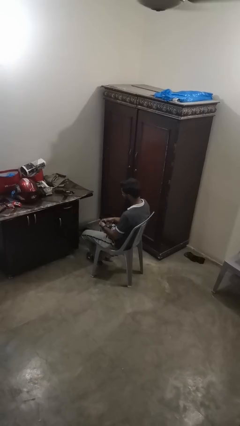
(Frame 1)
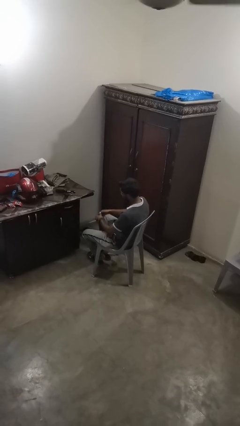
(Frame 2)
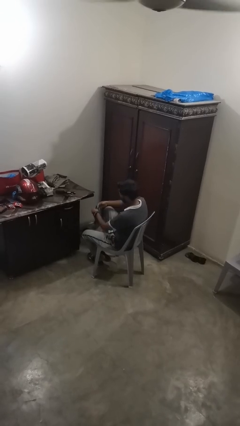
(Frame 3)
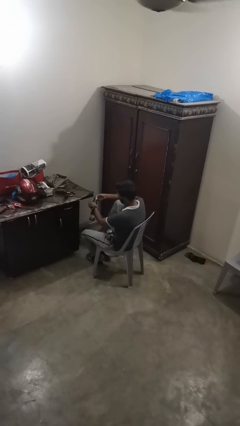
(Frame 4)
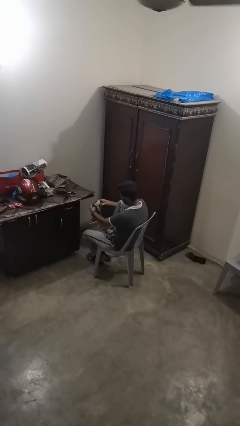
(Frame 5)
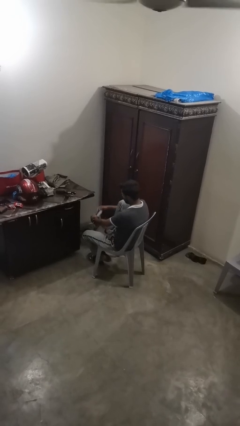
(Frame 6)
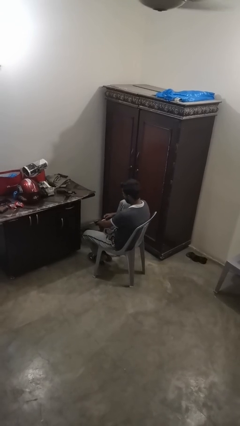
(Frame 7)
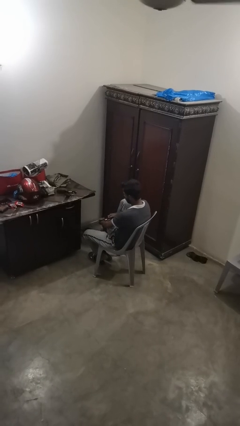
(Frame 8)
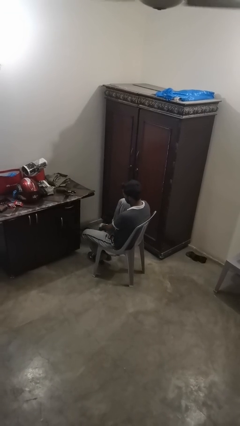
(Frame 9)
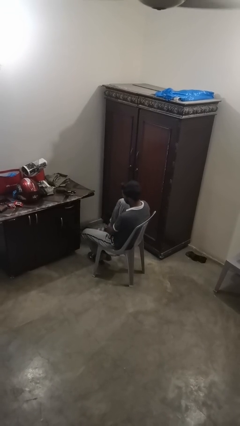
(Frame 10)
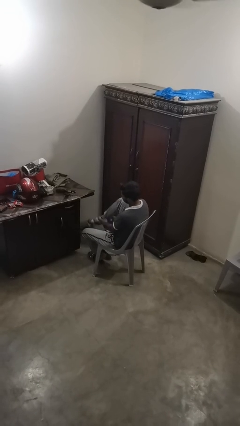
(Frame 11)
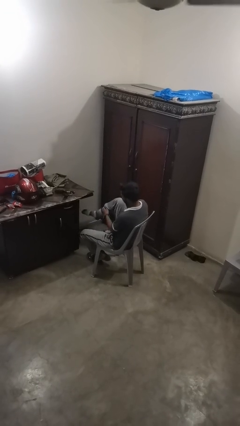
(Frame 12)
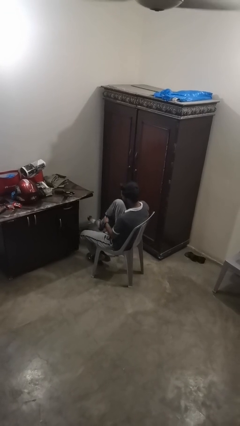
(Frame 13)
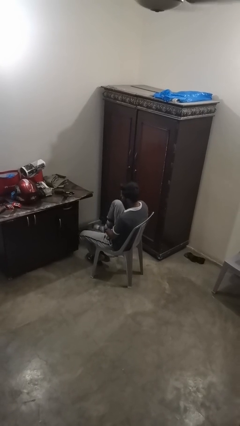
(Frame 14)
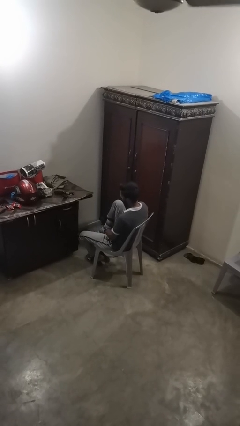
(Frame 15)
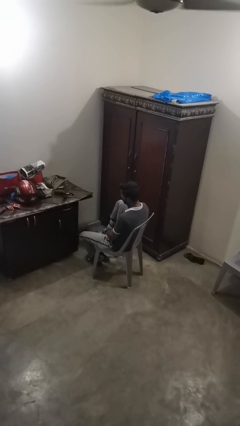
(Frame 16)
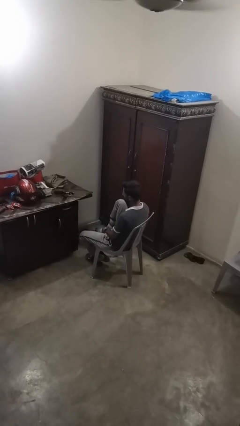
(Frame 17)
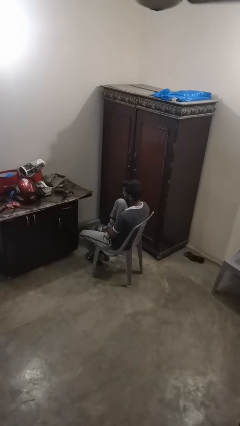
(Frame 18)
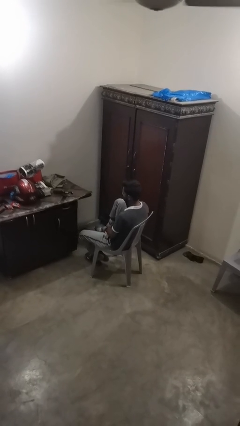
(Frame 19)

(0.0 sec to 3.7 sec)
person puts on socks

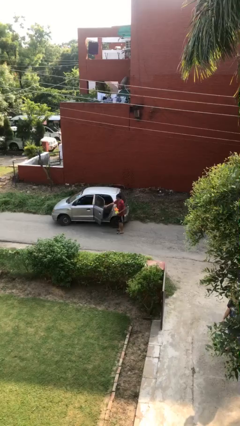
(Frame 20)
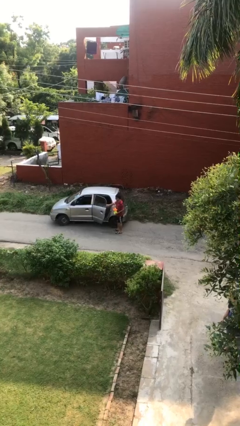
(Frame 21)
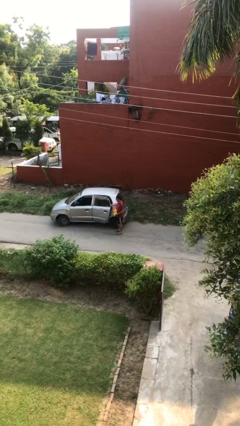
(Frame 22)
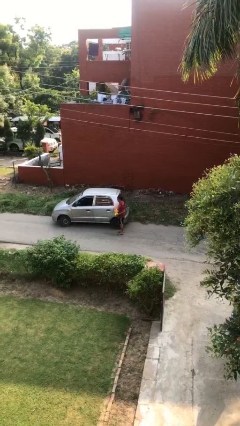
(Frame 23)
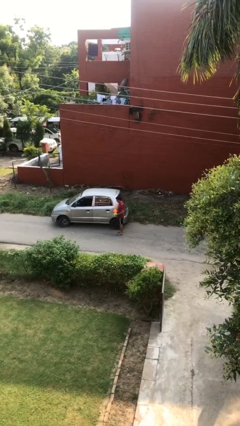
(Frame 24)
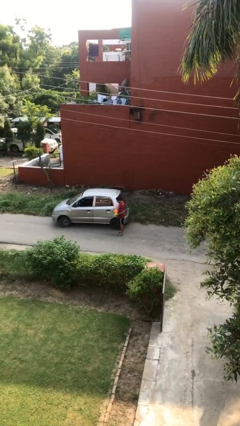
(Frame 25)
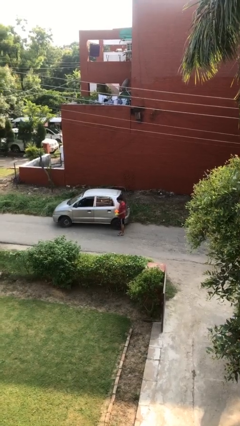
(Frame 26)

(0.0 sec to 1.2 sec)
person closes car door

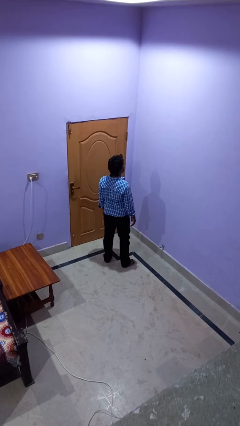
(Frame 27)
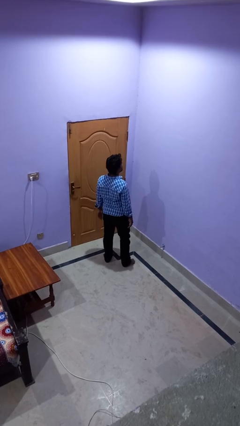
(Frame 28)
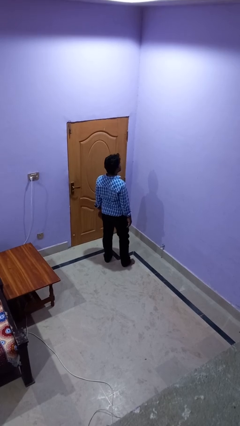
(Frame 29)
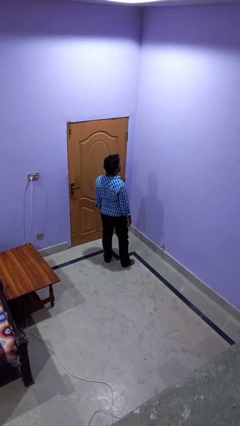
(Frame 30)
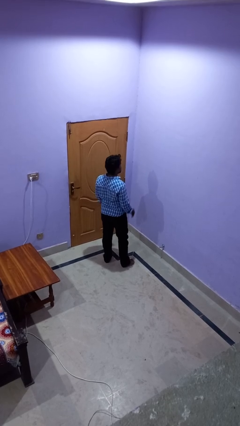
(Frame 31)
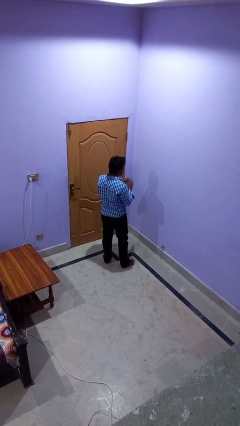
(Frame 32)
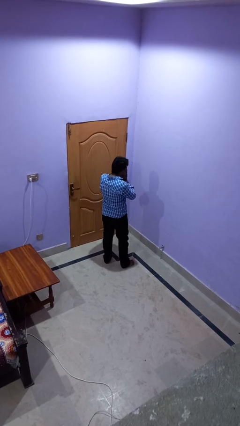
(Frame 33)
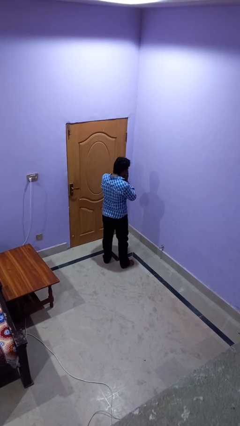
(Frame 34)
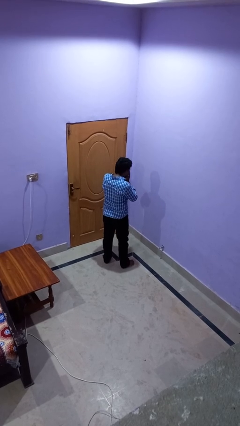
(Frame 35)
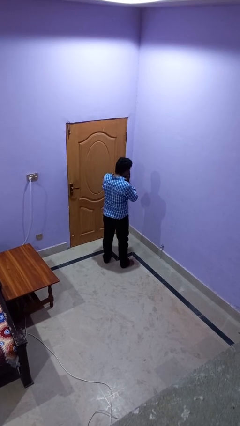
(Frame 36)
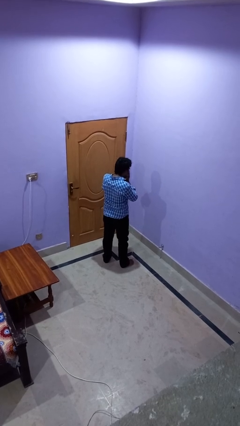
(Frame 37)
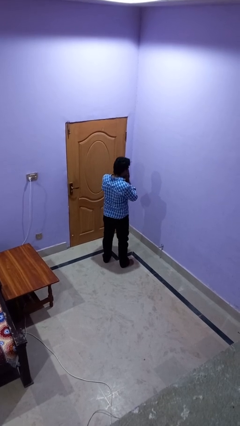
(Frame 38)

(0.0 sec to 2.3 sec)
person sneezes into hand

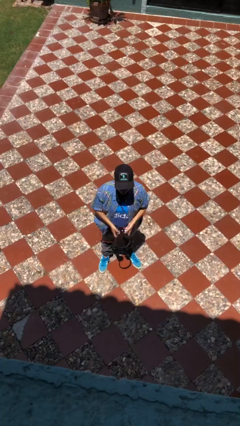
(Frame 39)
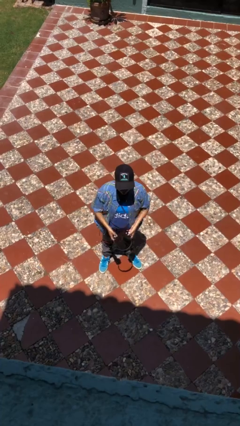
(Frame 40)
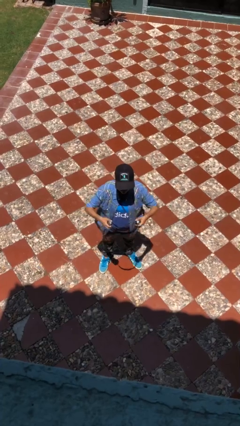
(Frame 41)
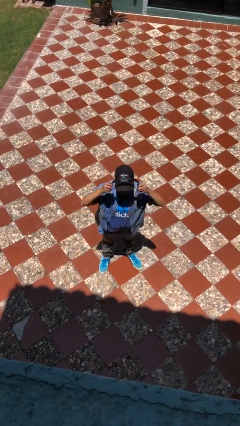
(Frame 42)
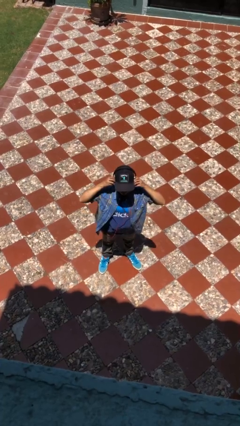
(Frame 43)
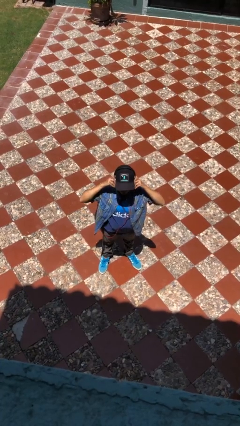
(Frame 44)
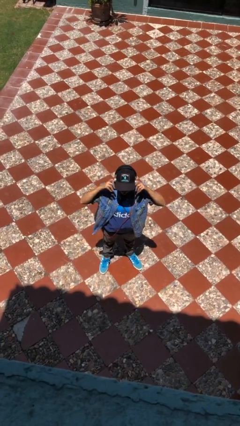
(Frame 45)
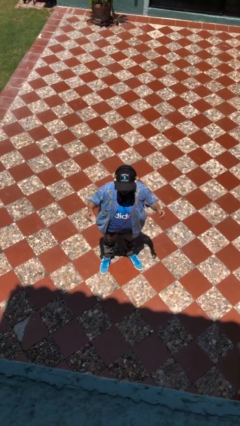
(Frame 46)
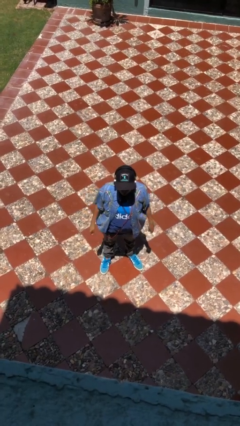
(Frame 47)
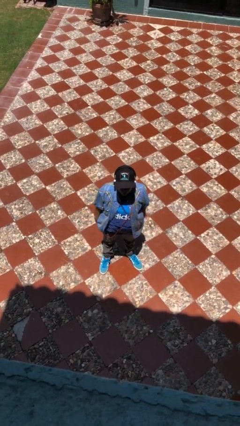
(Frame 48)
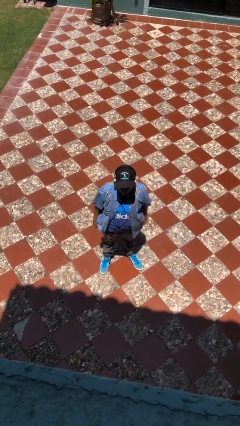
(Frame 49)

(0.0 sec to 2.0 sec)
person puts on headphones

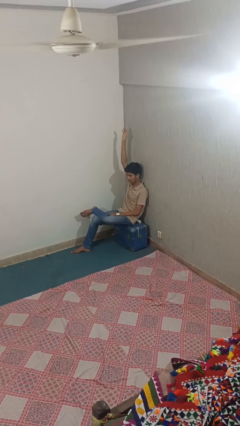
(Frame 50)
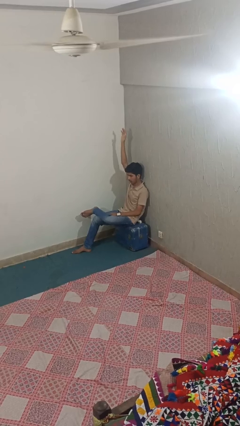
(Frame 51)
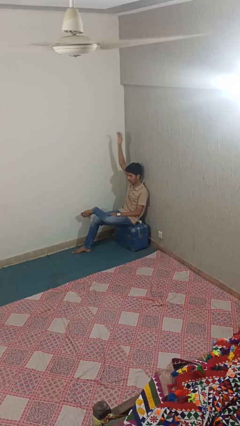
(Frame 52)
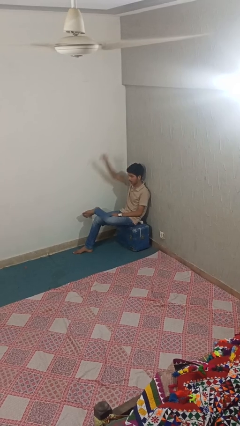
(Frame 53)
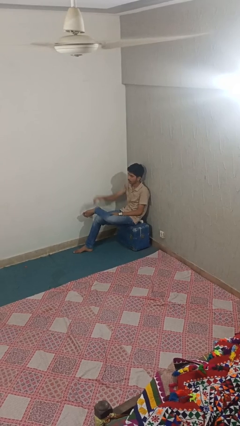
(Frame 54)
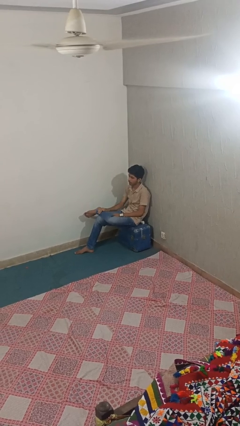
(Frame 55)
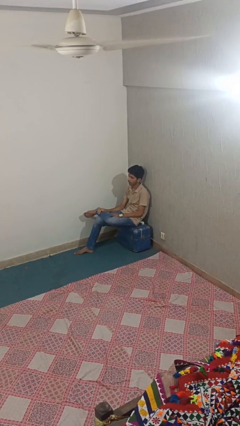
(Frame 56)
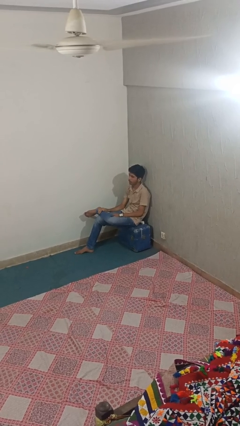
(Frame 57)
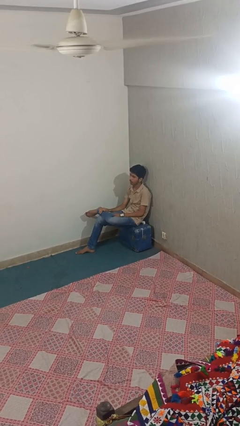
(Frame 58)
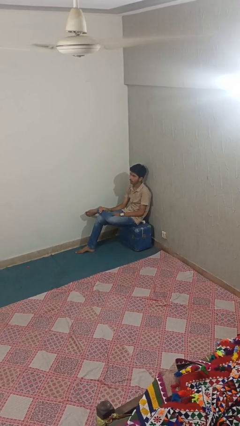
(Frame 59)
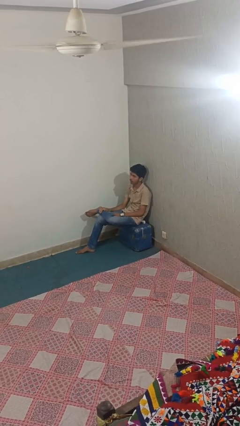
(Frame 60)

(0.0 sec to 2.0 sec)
person gestures lower hand

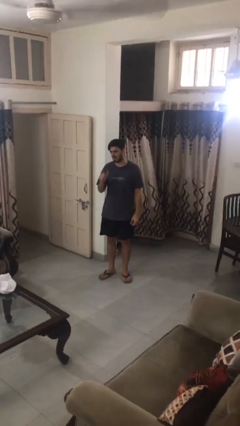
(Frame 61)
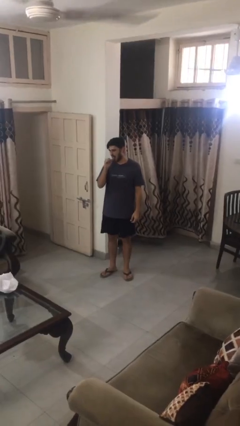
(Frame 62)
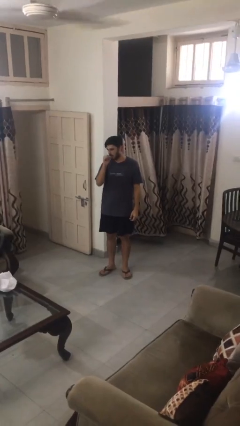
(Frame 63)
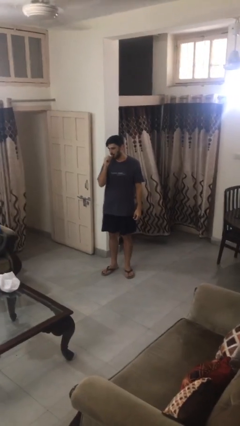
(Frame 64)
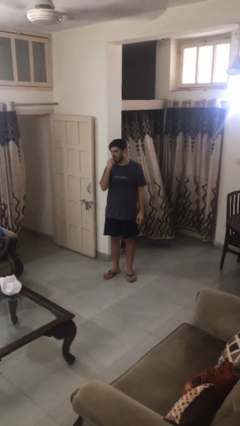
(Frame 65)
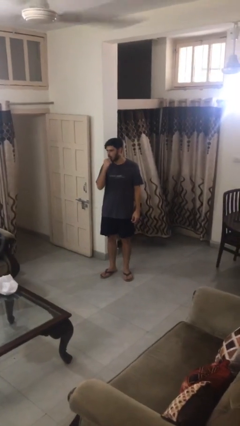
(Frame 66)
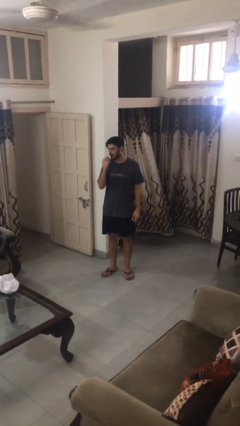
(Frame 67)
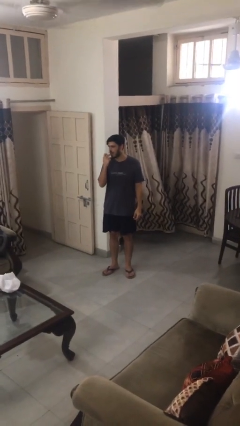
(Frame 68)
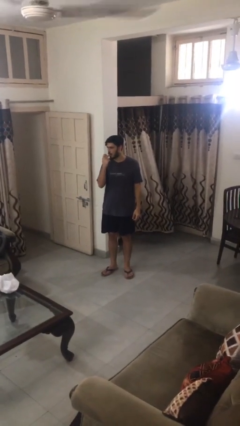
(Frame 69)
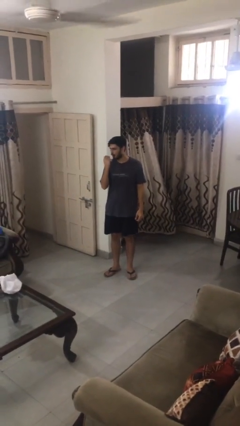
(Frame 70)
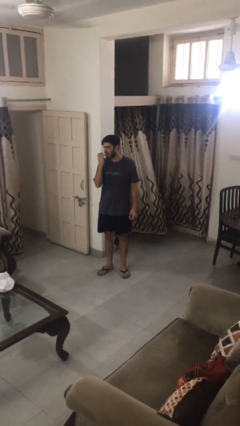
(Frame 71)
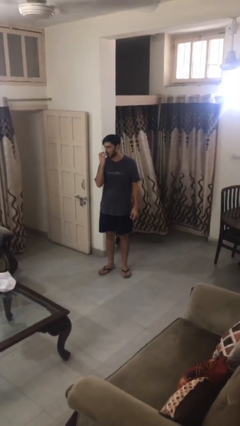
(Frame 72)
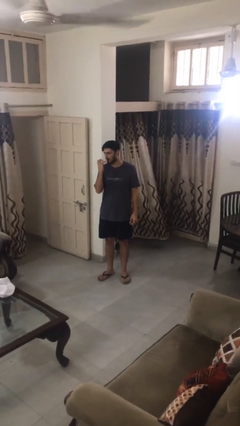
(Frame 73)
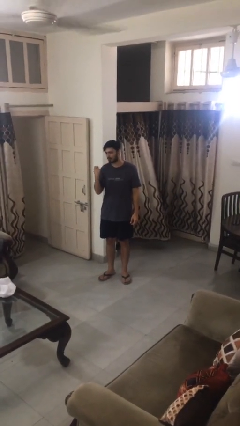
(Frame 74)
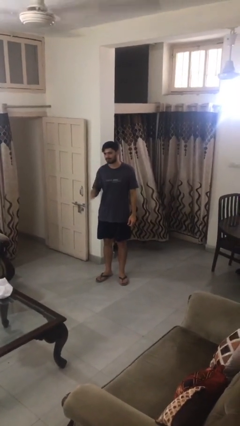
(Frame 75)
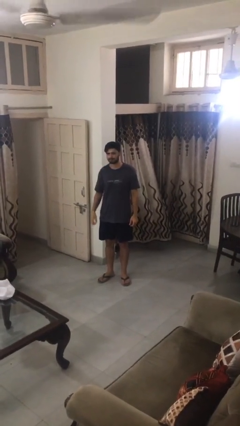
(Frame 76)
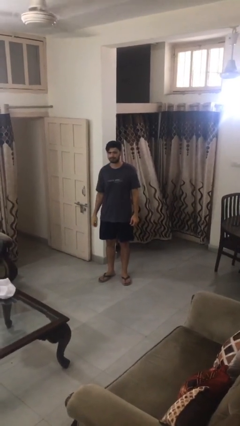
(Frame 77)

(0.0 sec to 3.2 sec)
person licks fingers

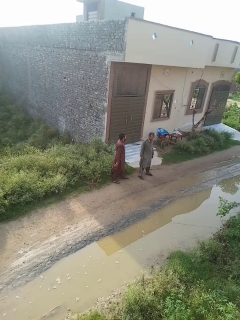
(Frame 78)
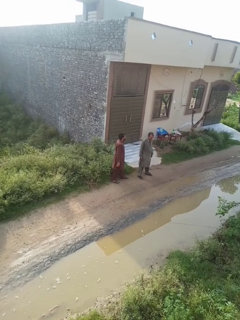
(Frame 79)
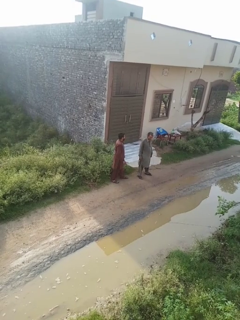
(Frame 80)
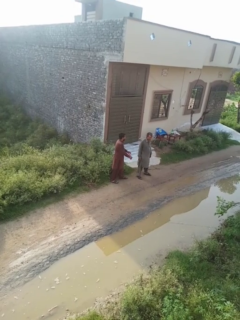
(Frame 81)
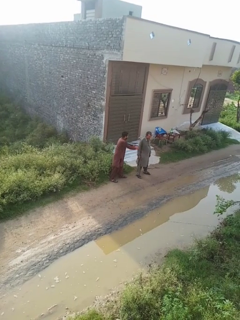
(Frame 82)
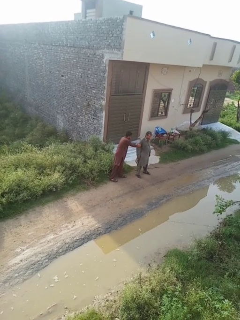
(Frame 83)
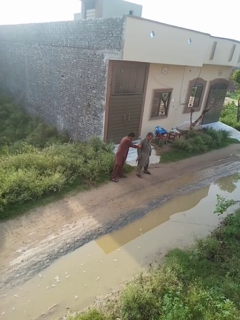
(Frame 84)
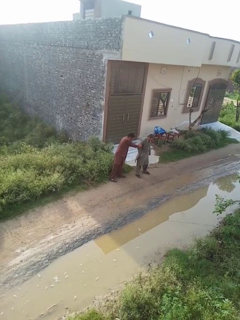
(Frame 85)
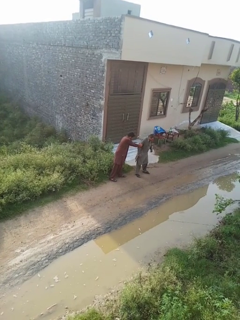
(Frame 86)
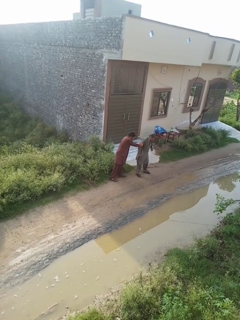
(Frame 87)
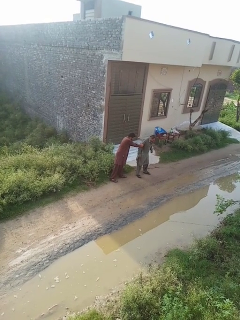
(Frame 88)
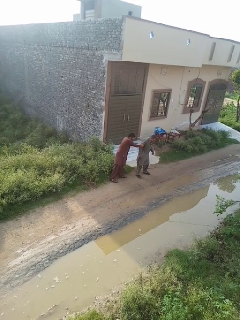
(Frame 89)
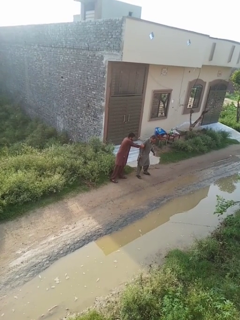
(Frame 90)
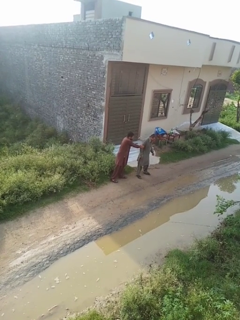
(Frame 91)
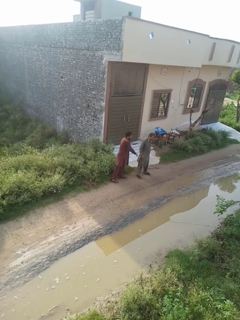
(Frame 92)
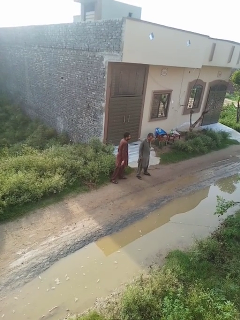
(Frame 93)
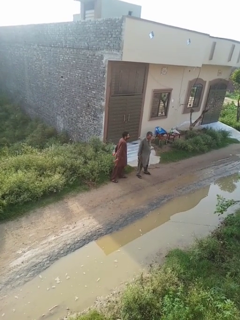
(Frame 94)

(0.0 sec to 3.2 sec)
person grabs person by bicep

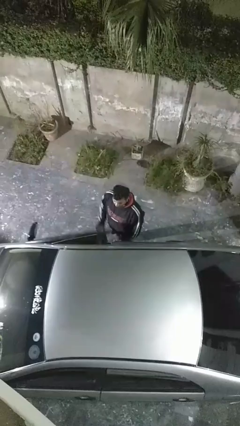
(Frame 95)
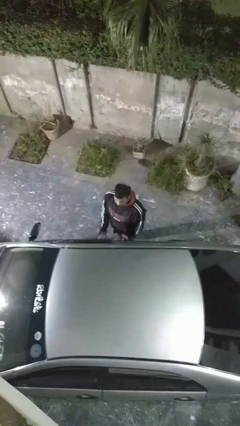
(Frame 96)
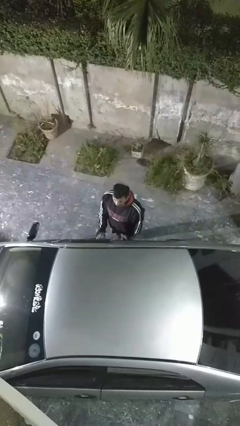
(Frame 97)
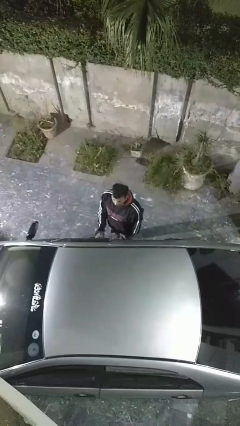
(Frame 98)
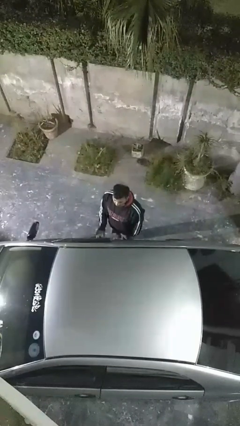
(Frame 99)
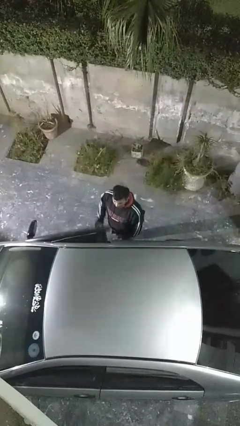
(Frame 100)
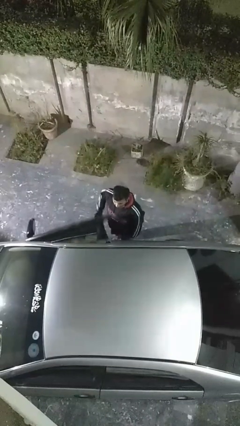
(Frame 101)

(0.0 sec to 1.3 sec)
person opens car door
